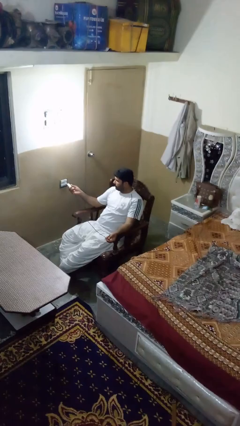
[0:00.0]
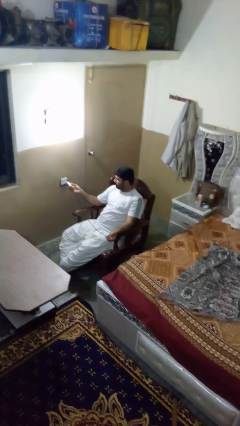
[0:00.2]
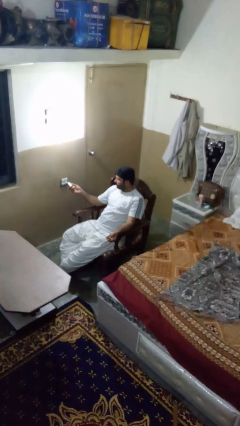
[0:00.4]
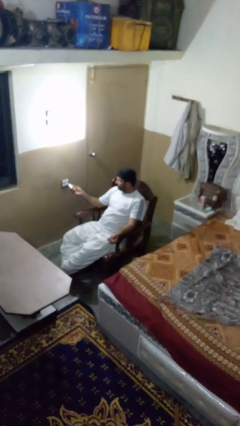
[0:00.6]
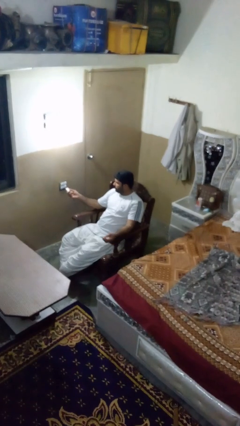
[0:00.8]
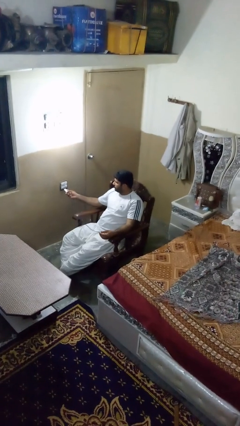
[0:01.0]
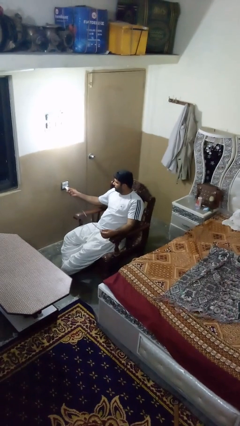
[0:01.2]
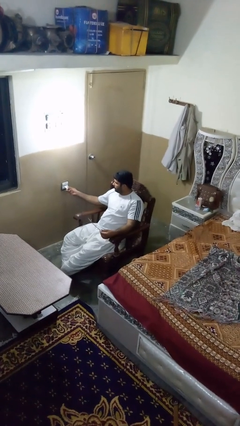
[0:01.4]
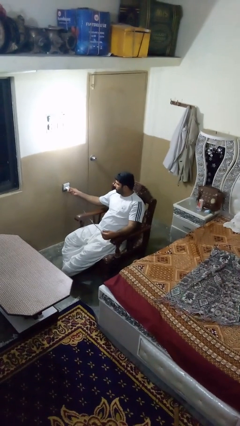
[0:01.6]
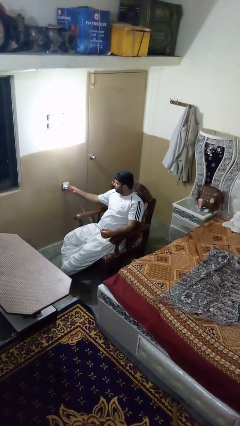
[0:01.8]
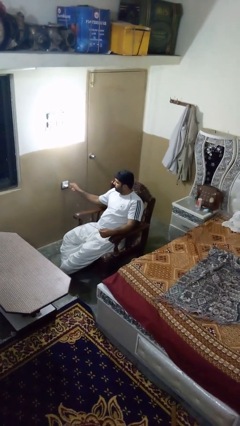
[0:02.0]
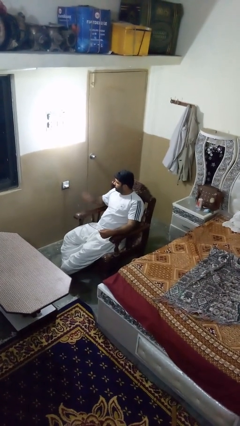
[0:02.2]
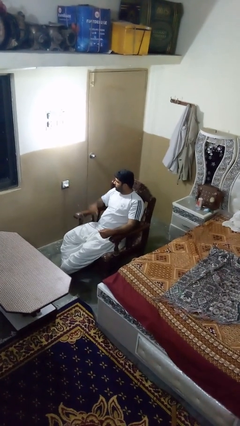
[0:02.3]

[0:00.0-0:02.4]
person plugs into electrical socket

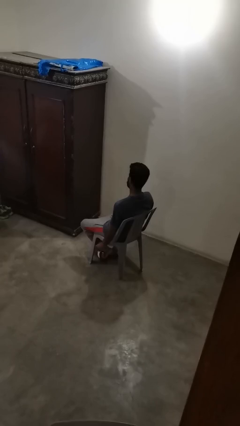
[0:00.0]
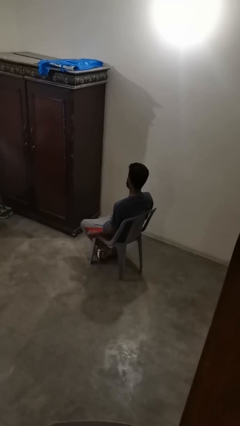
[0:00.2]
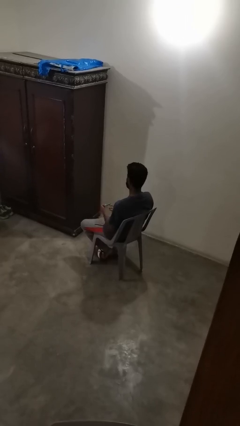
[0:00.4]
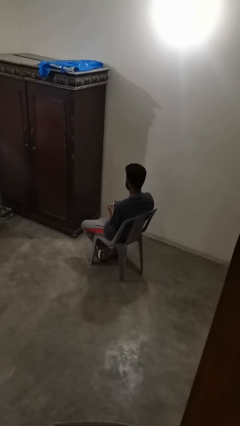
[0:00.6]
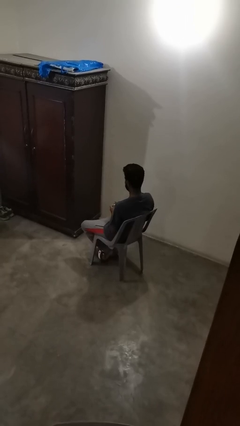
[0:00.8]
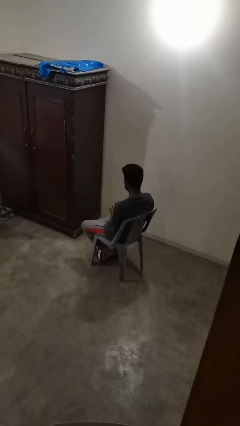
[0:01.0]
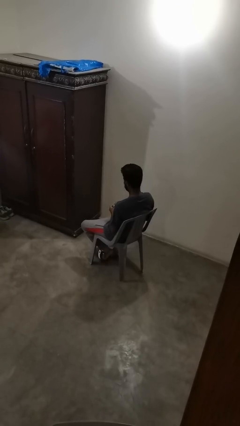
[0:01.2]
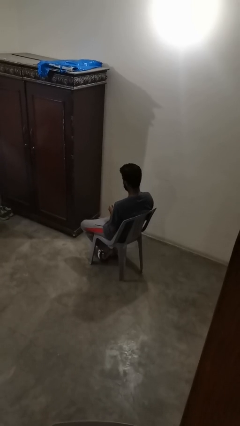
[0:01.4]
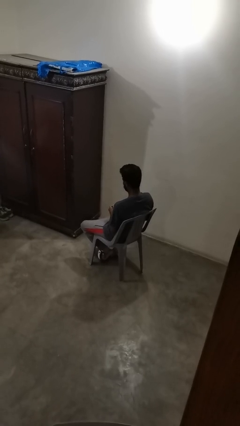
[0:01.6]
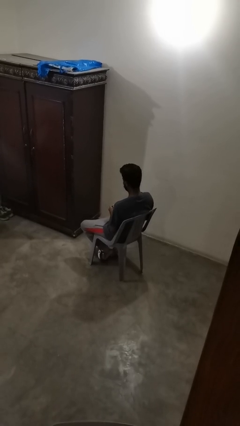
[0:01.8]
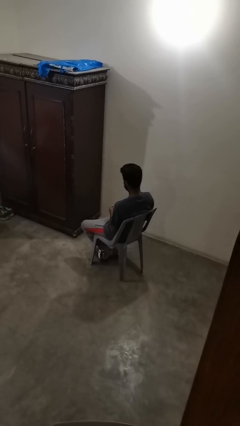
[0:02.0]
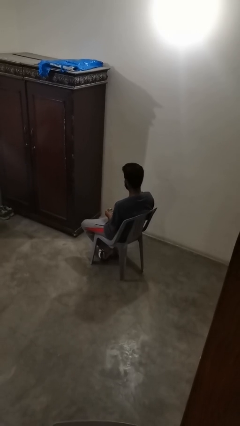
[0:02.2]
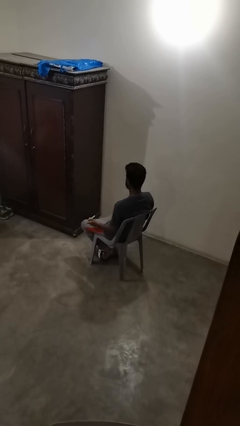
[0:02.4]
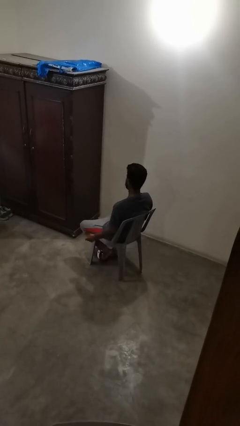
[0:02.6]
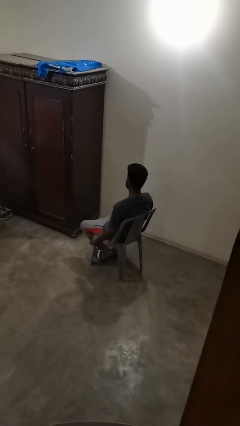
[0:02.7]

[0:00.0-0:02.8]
person clips fingernails

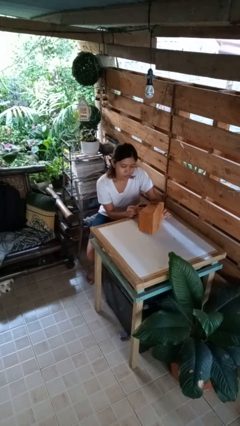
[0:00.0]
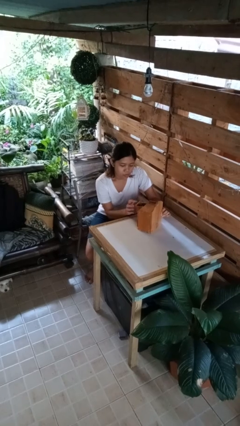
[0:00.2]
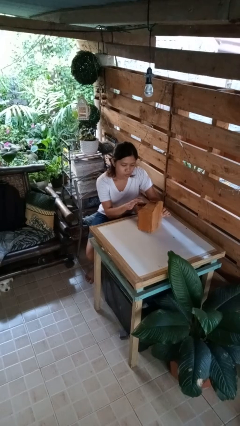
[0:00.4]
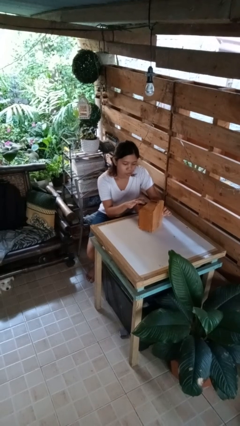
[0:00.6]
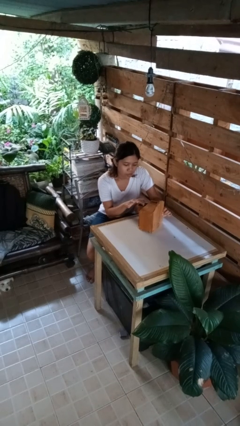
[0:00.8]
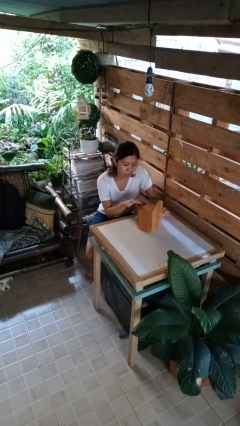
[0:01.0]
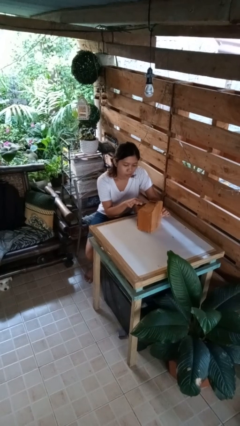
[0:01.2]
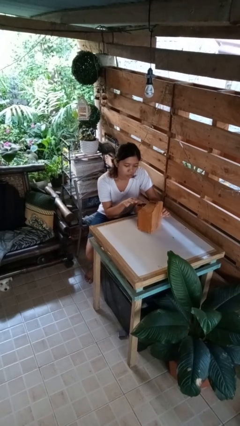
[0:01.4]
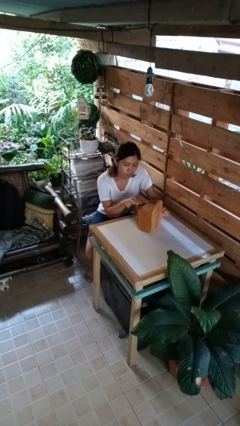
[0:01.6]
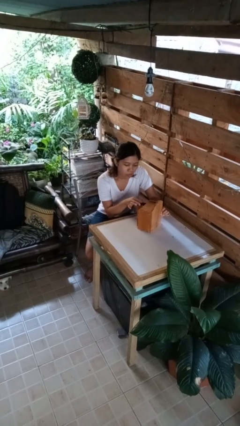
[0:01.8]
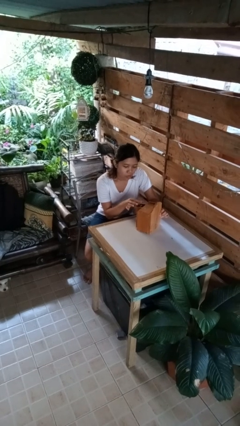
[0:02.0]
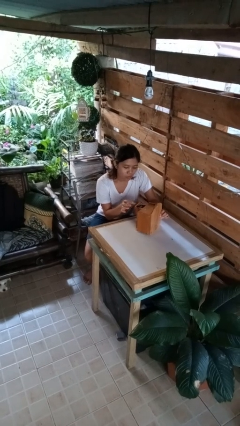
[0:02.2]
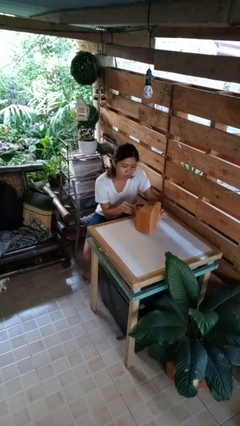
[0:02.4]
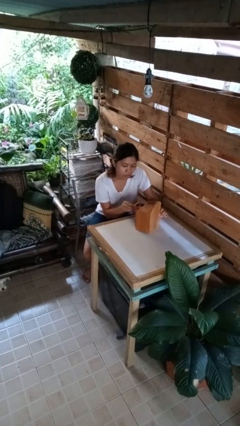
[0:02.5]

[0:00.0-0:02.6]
person searches jewelry box

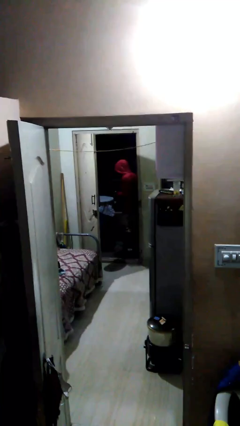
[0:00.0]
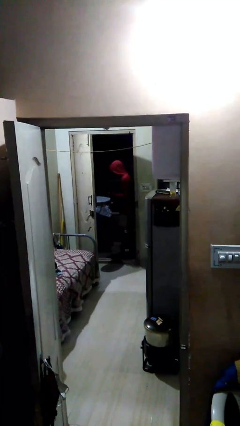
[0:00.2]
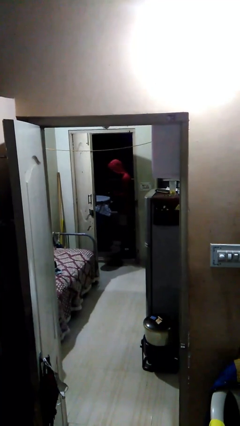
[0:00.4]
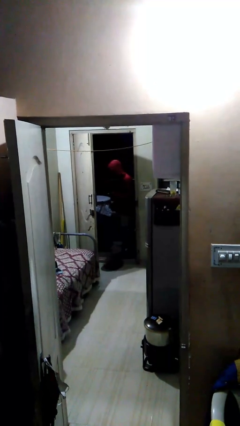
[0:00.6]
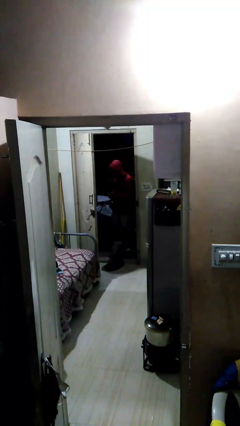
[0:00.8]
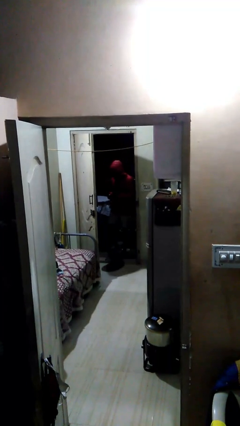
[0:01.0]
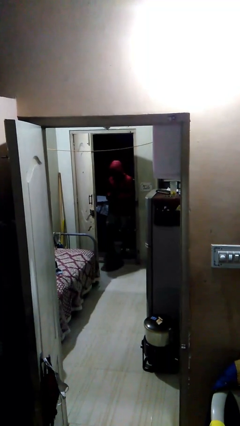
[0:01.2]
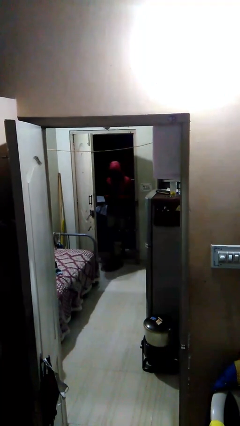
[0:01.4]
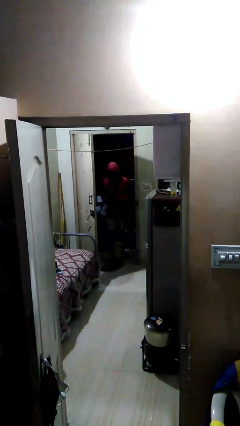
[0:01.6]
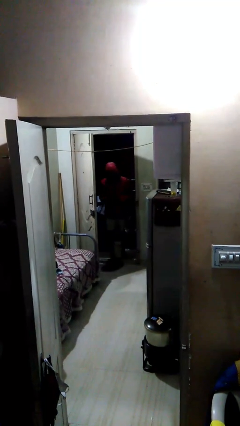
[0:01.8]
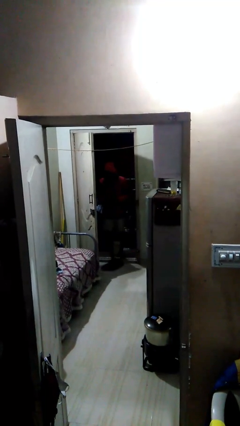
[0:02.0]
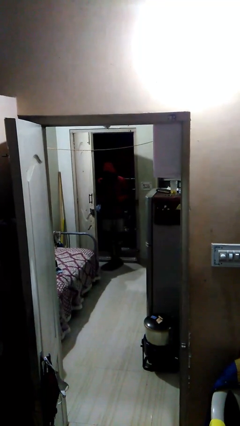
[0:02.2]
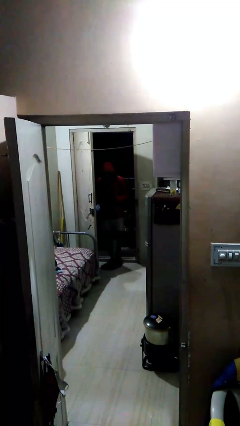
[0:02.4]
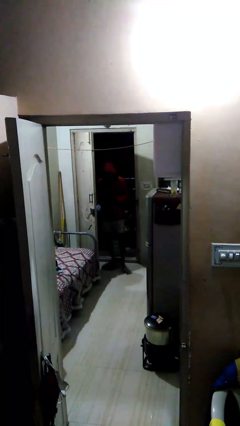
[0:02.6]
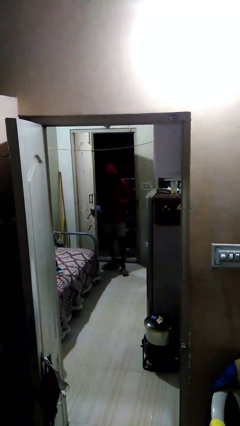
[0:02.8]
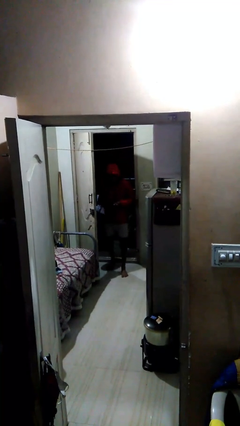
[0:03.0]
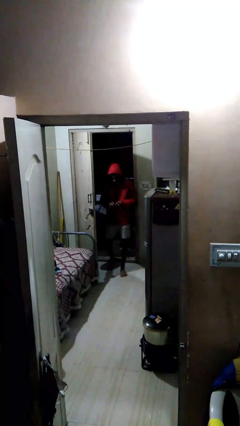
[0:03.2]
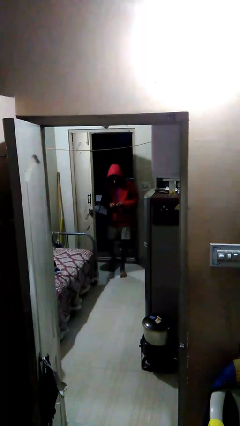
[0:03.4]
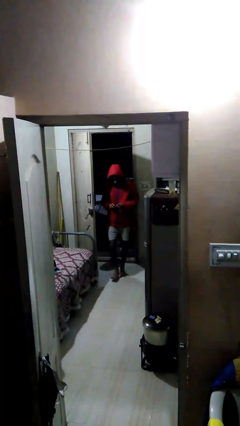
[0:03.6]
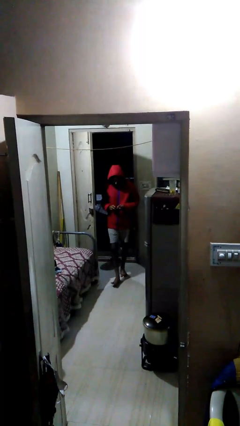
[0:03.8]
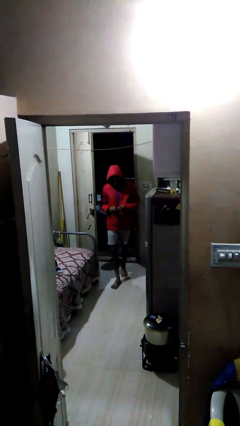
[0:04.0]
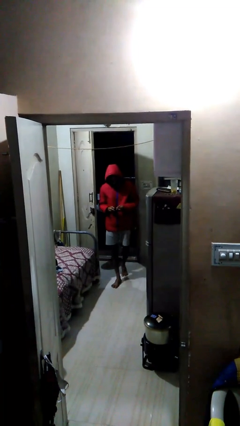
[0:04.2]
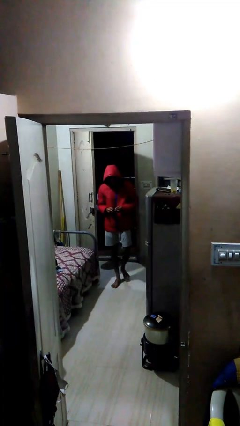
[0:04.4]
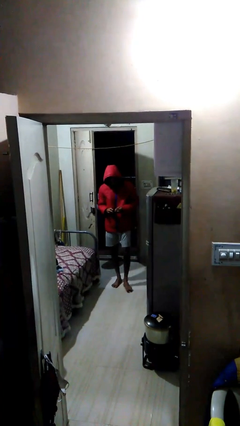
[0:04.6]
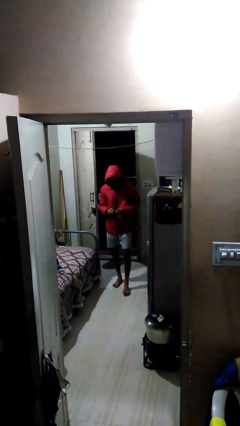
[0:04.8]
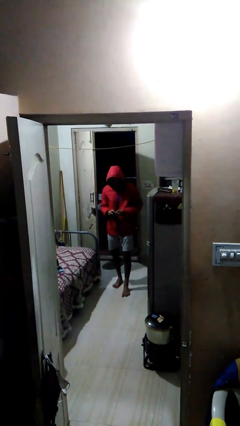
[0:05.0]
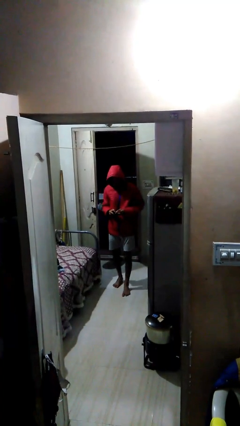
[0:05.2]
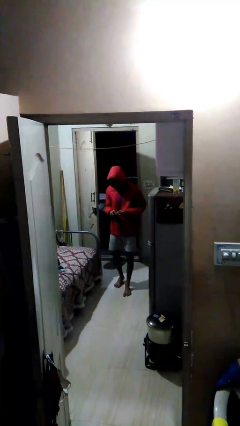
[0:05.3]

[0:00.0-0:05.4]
person enters scene through structure

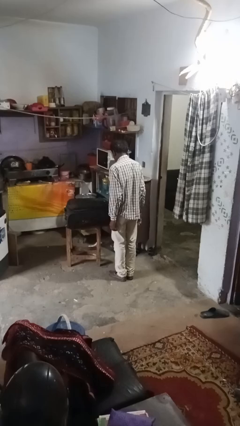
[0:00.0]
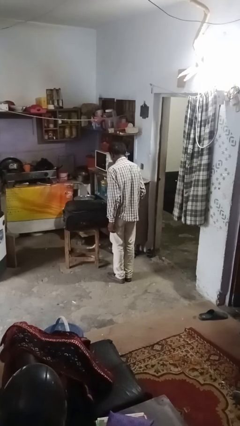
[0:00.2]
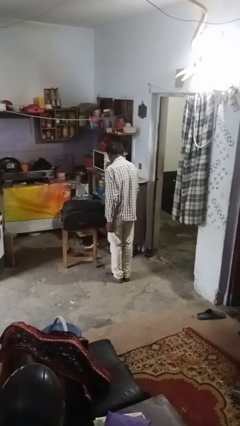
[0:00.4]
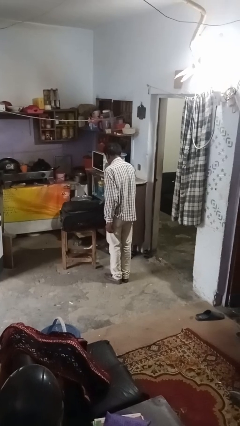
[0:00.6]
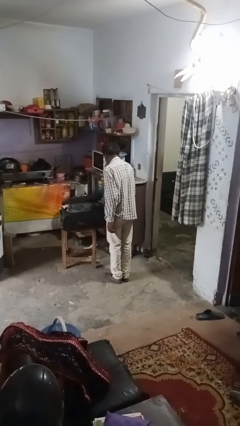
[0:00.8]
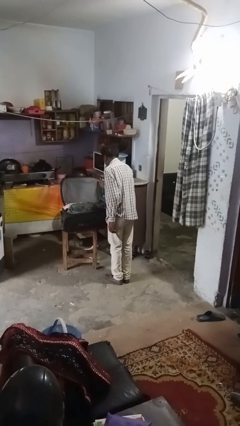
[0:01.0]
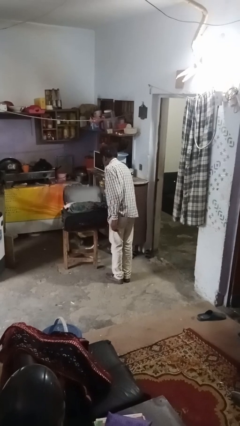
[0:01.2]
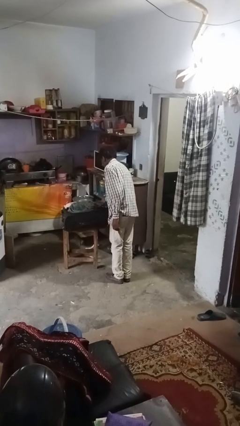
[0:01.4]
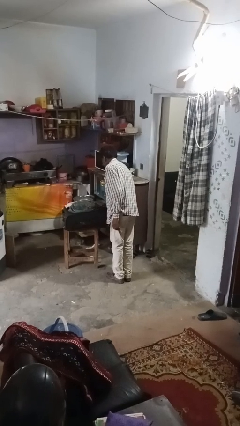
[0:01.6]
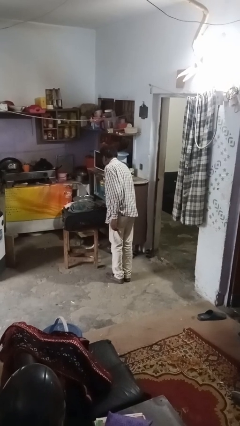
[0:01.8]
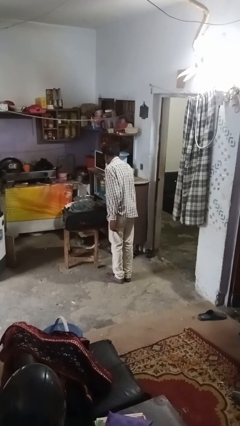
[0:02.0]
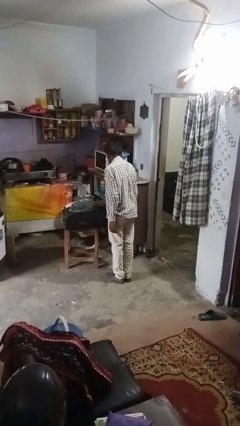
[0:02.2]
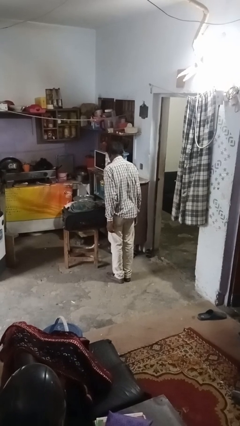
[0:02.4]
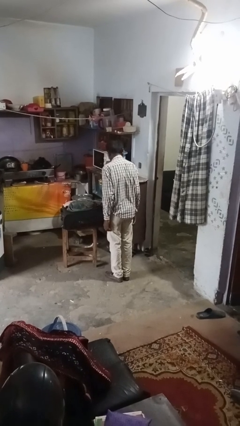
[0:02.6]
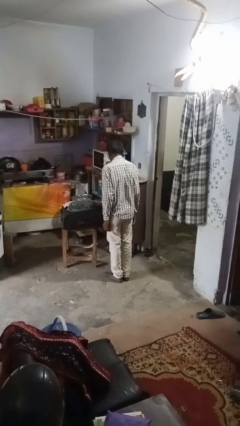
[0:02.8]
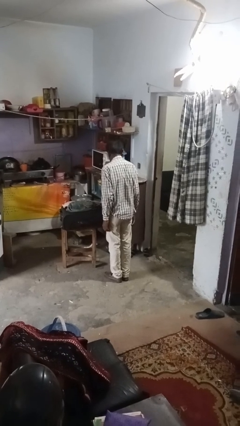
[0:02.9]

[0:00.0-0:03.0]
person opens suitcase

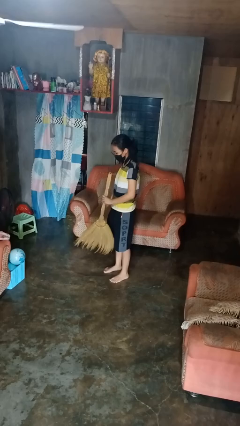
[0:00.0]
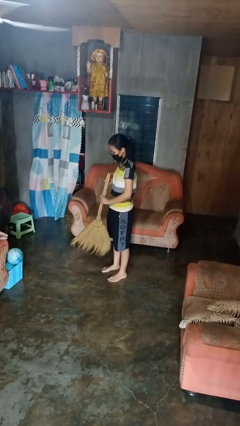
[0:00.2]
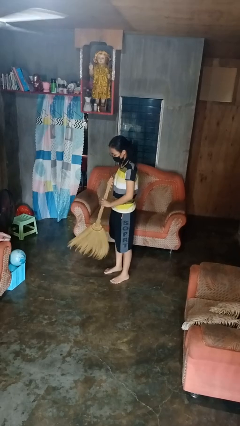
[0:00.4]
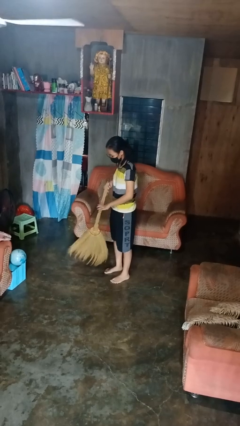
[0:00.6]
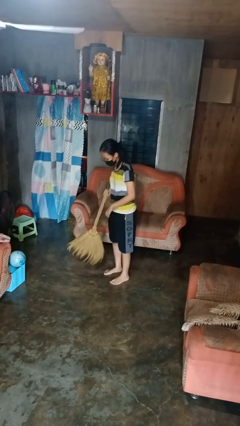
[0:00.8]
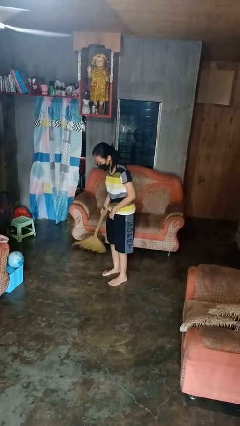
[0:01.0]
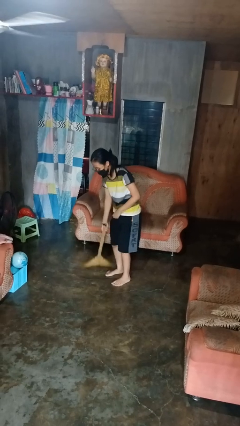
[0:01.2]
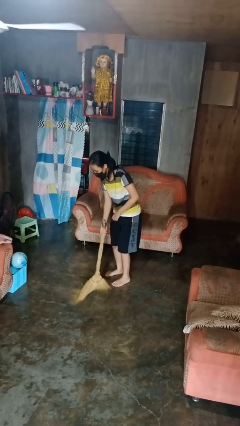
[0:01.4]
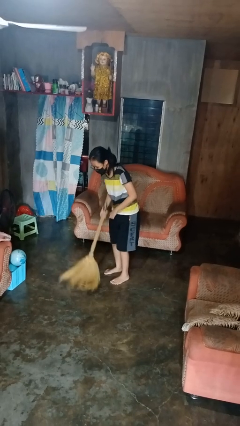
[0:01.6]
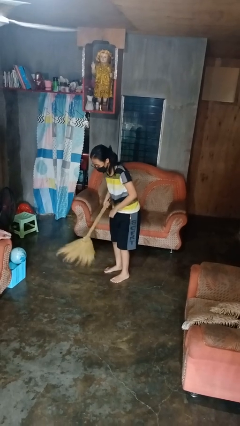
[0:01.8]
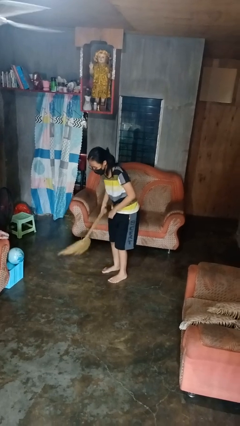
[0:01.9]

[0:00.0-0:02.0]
person sweeps floor
